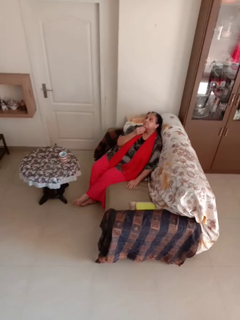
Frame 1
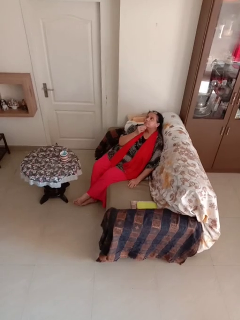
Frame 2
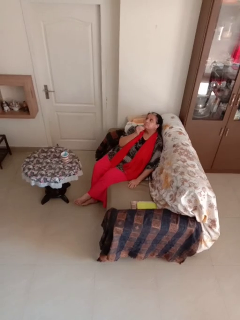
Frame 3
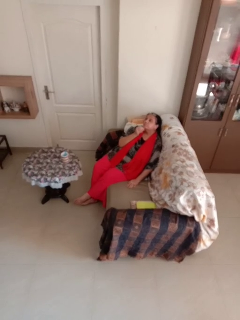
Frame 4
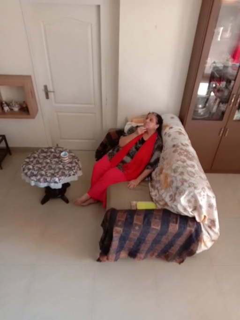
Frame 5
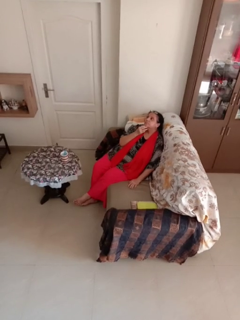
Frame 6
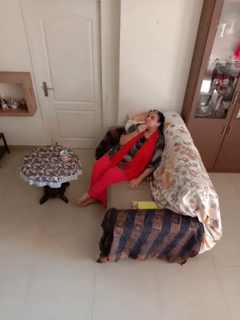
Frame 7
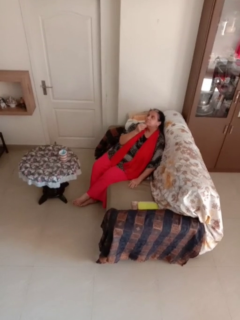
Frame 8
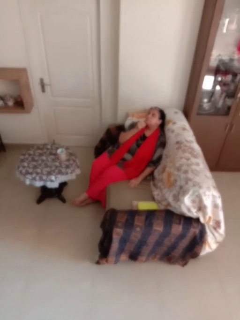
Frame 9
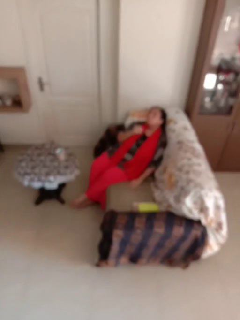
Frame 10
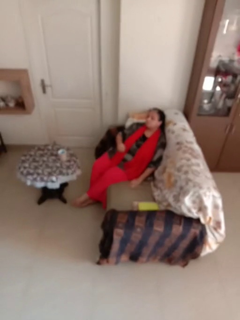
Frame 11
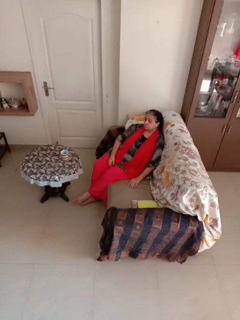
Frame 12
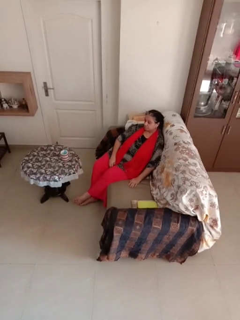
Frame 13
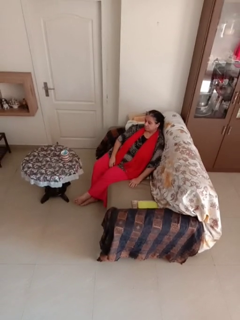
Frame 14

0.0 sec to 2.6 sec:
person strokes chin

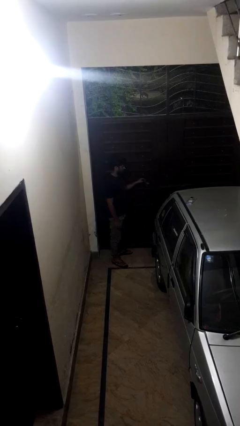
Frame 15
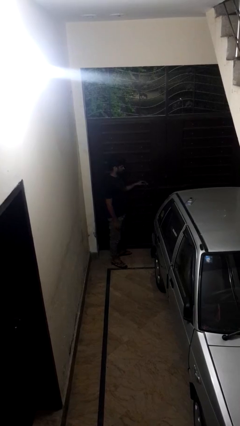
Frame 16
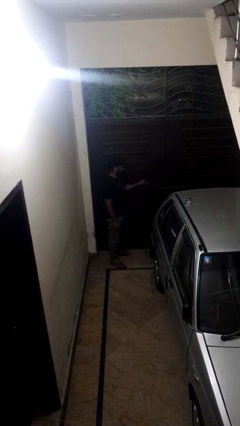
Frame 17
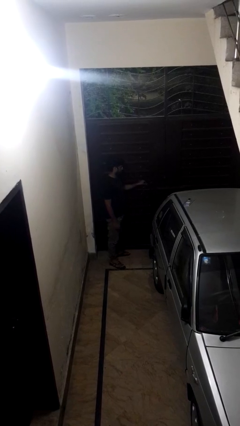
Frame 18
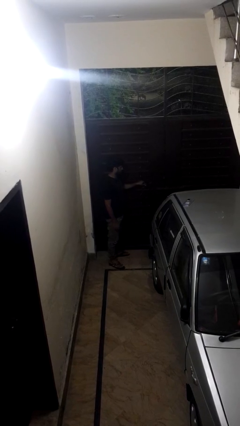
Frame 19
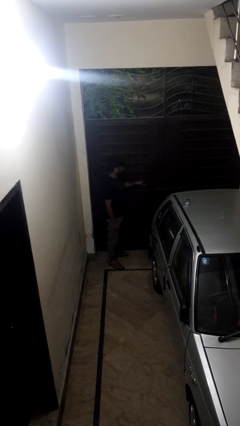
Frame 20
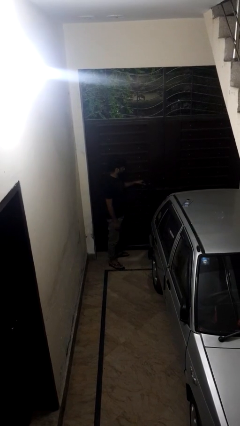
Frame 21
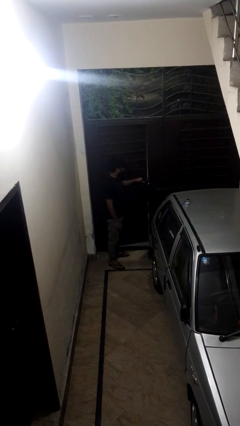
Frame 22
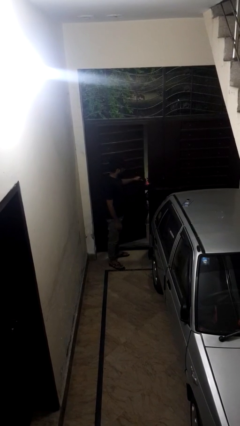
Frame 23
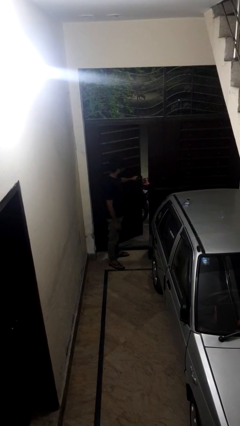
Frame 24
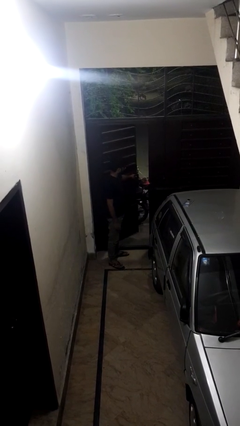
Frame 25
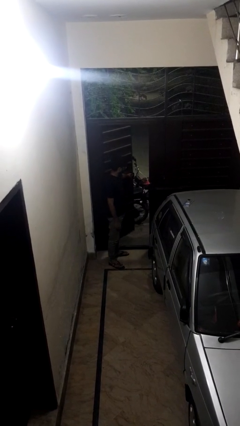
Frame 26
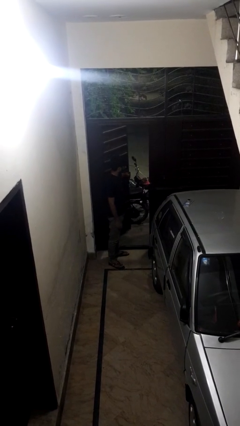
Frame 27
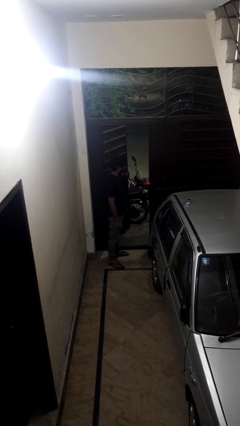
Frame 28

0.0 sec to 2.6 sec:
person opens gate

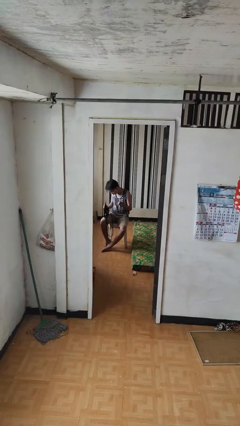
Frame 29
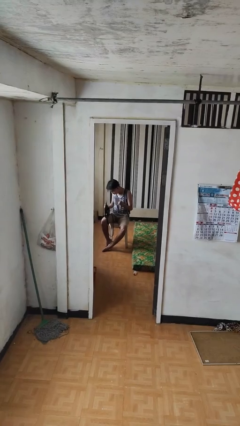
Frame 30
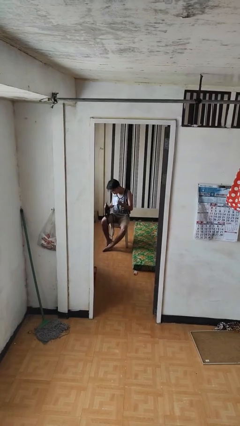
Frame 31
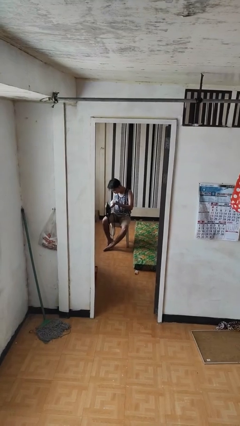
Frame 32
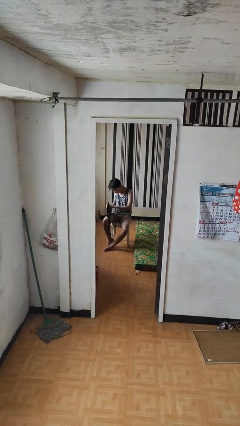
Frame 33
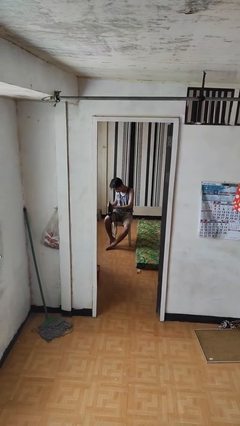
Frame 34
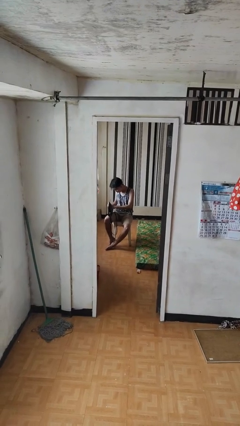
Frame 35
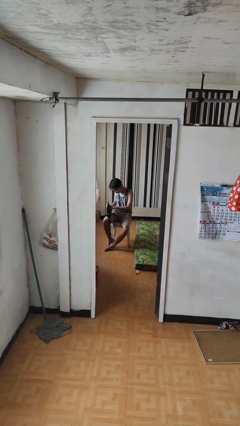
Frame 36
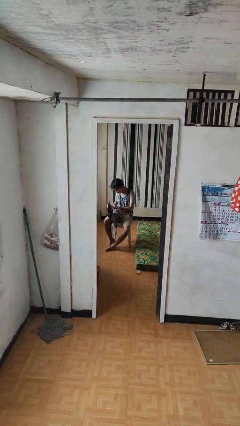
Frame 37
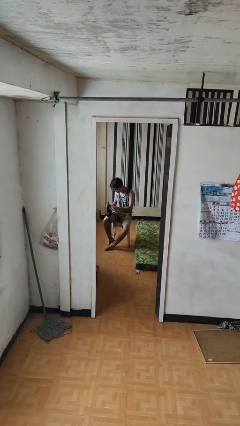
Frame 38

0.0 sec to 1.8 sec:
person puts object into purse

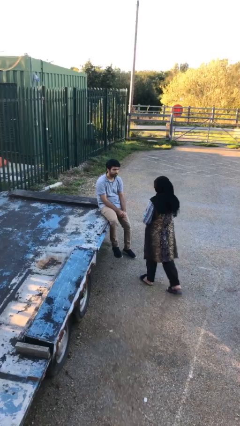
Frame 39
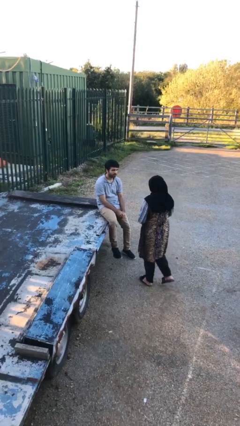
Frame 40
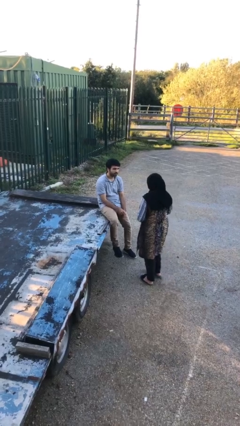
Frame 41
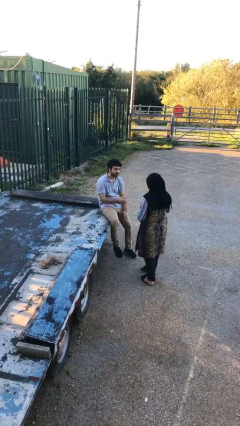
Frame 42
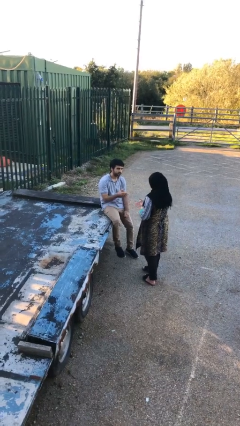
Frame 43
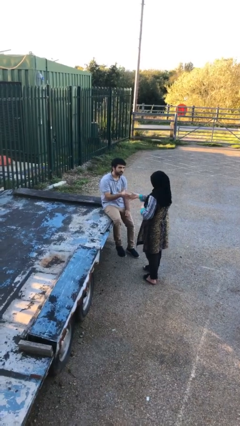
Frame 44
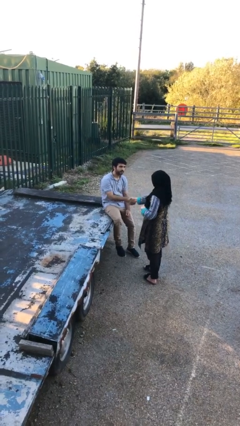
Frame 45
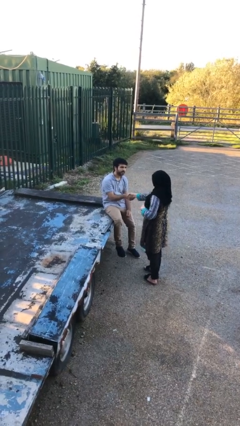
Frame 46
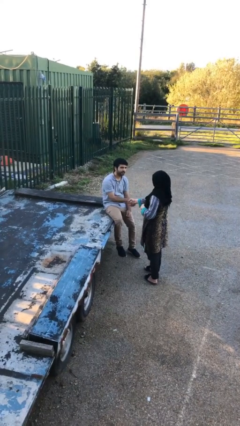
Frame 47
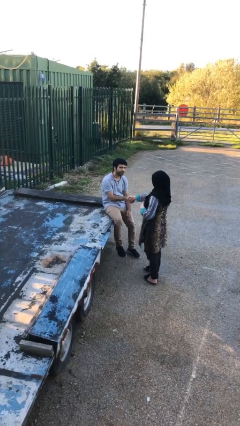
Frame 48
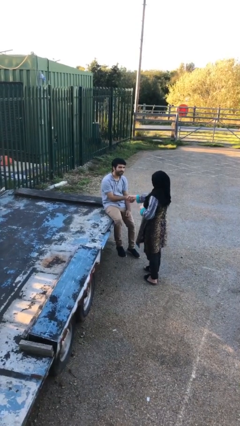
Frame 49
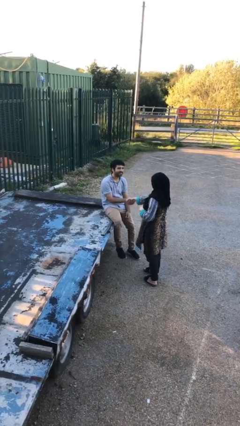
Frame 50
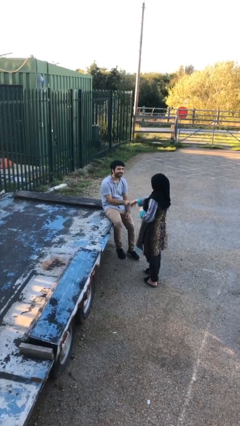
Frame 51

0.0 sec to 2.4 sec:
person shakes hand

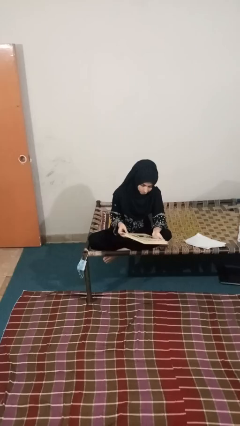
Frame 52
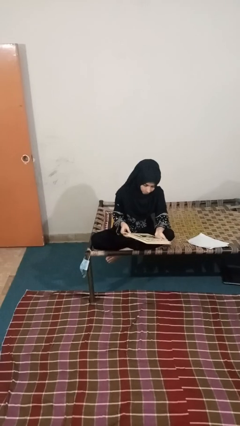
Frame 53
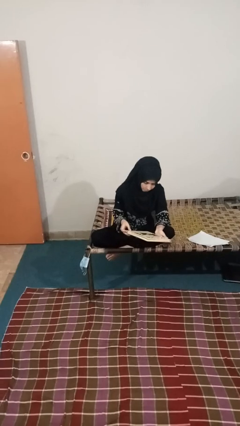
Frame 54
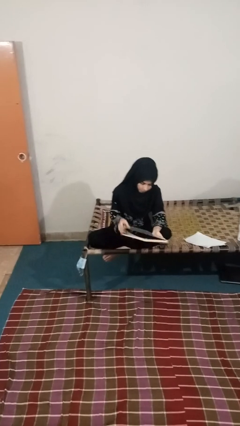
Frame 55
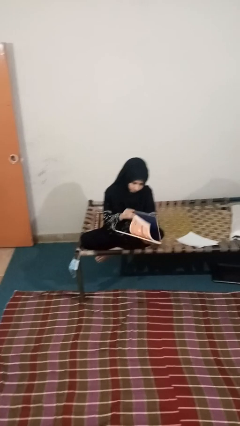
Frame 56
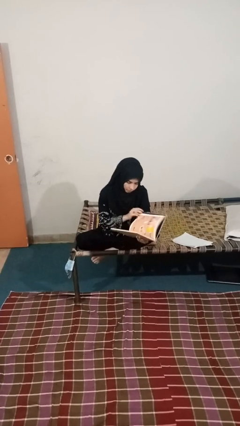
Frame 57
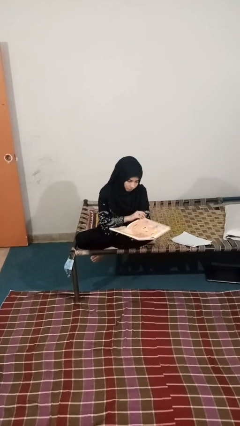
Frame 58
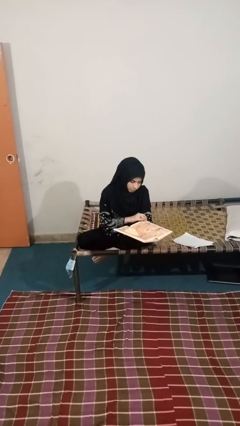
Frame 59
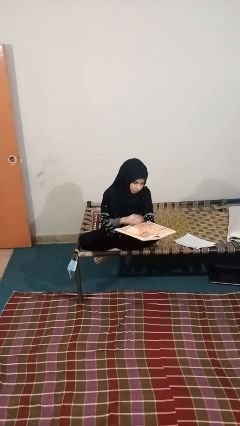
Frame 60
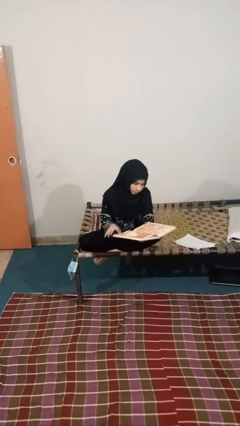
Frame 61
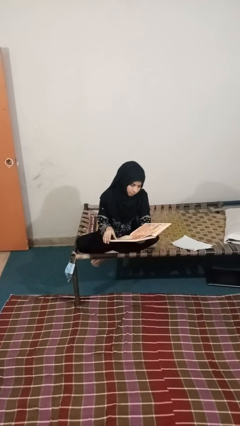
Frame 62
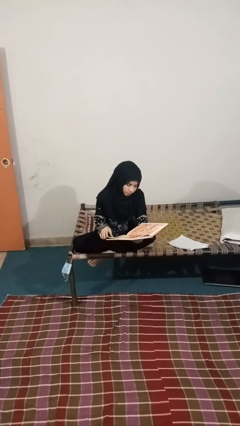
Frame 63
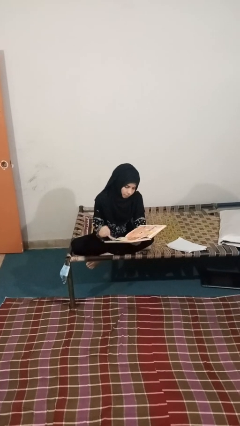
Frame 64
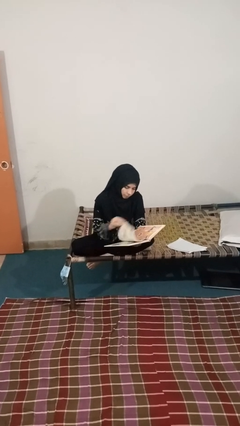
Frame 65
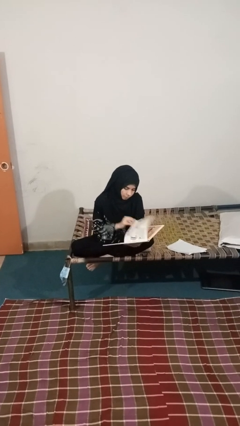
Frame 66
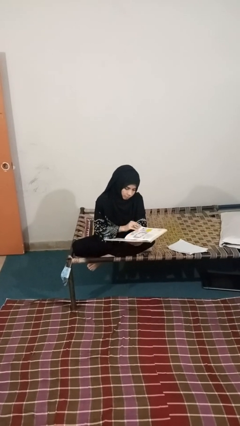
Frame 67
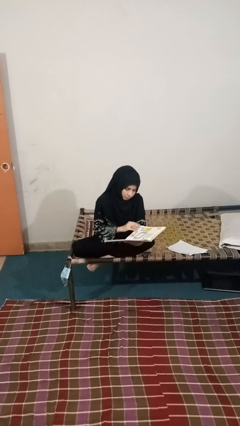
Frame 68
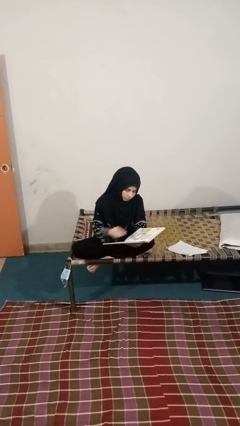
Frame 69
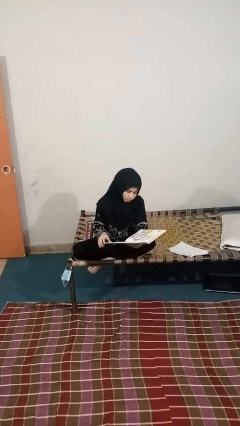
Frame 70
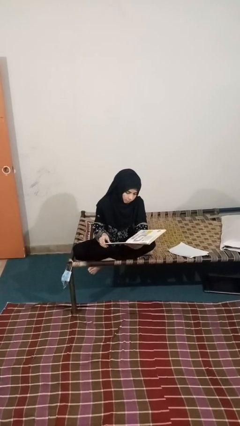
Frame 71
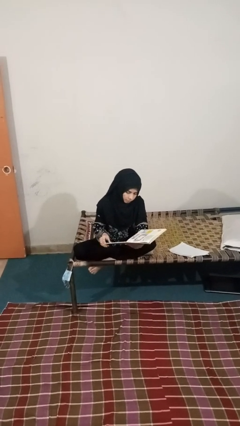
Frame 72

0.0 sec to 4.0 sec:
person reads magazine

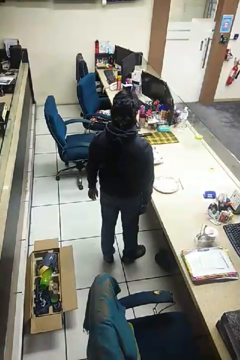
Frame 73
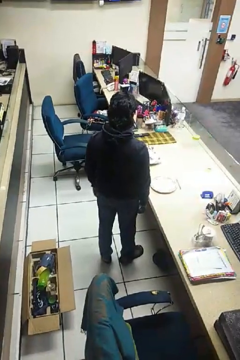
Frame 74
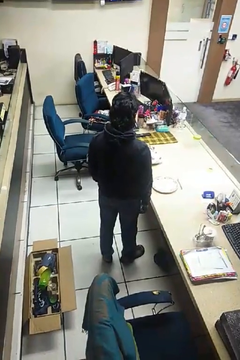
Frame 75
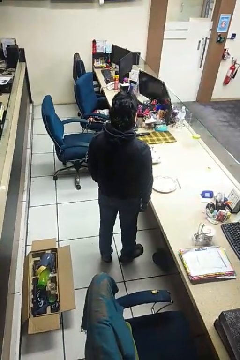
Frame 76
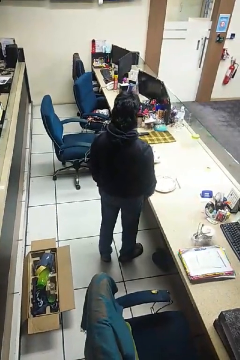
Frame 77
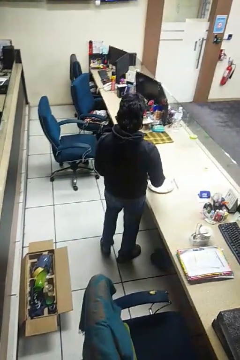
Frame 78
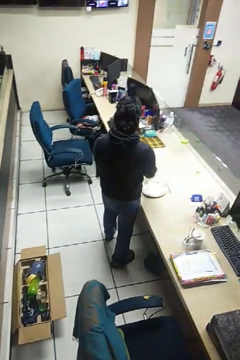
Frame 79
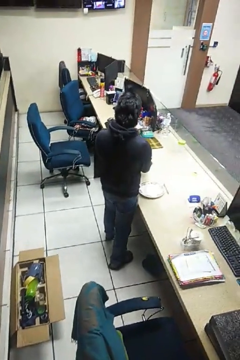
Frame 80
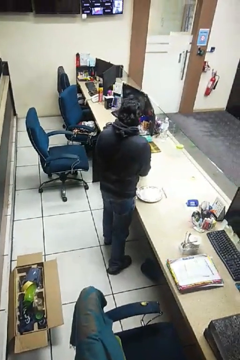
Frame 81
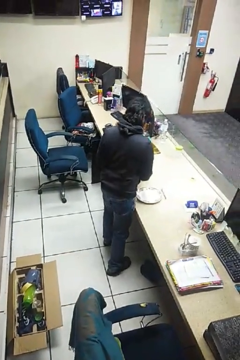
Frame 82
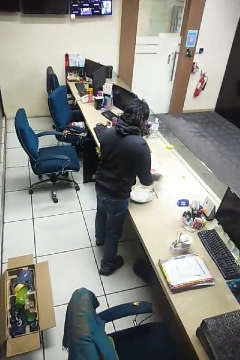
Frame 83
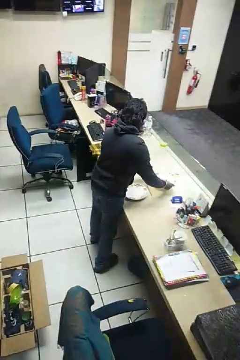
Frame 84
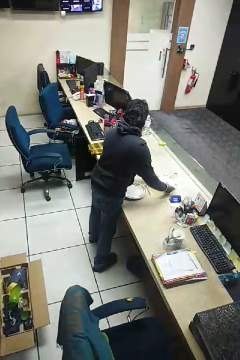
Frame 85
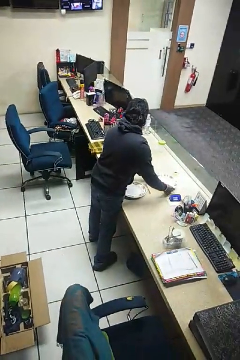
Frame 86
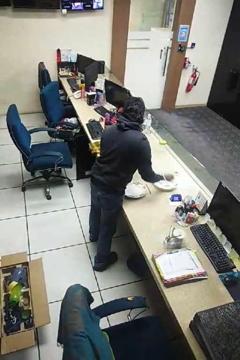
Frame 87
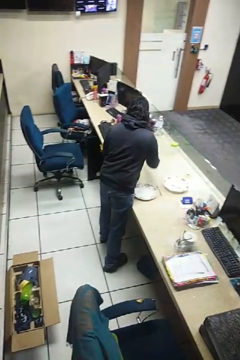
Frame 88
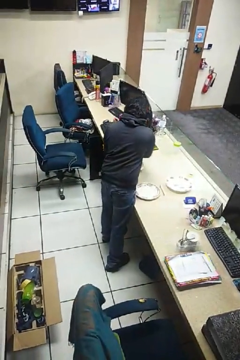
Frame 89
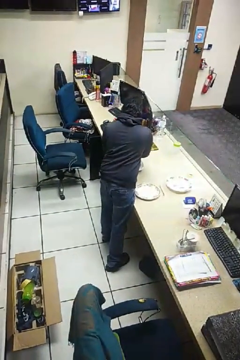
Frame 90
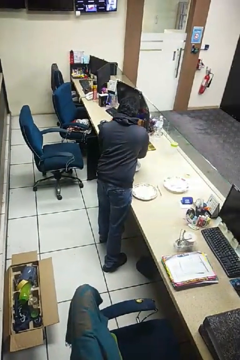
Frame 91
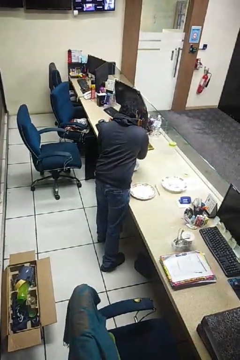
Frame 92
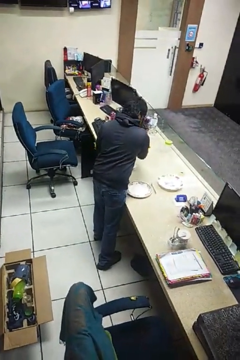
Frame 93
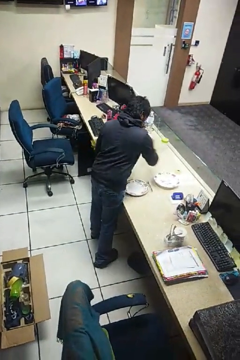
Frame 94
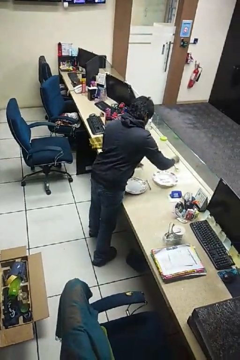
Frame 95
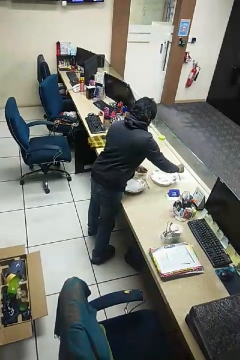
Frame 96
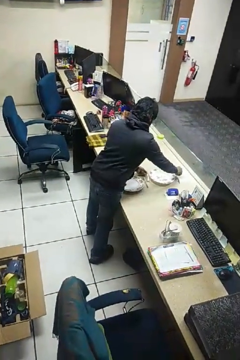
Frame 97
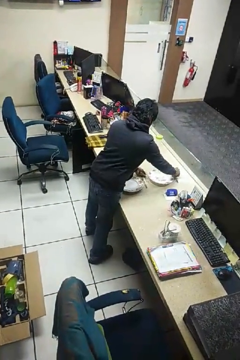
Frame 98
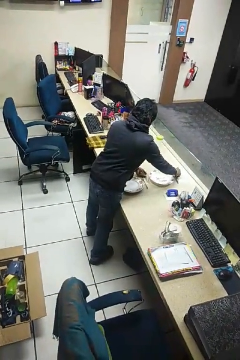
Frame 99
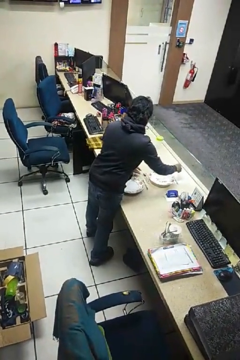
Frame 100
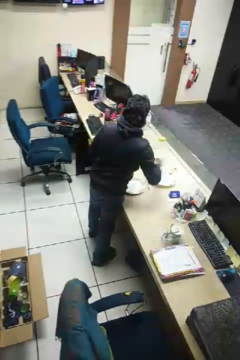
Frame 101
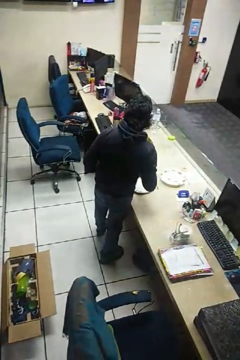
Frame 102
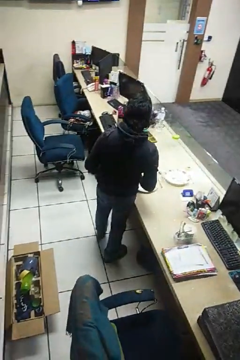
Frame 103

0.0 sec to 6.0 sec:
person sets table
